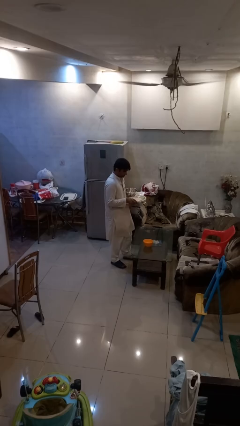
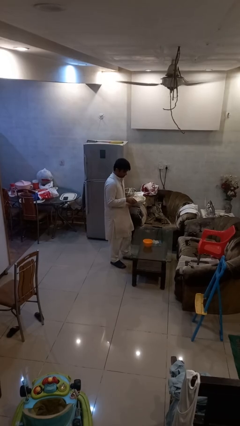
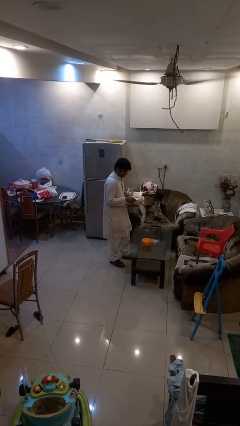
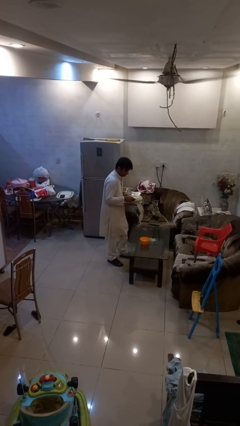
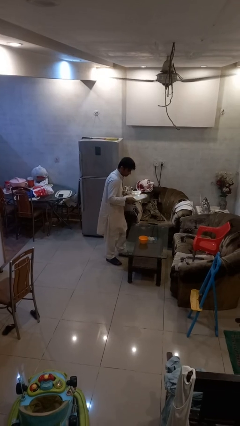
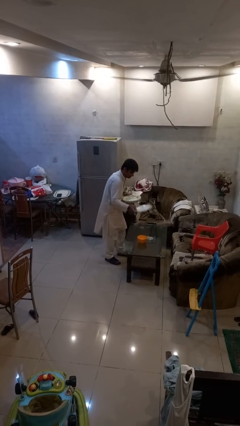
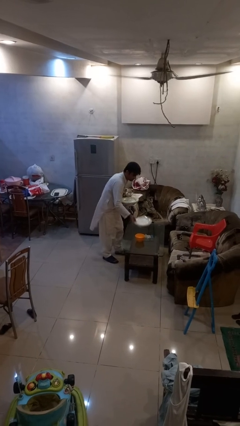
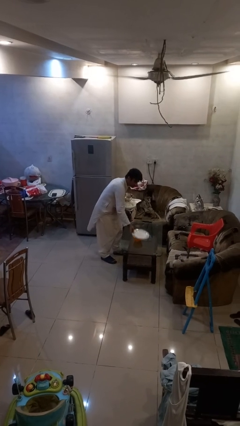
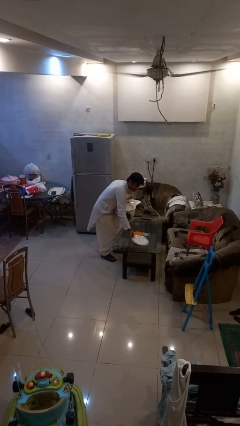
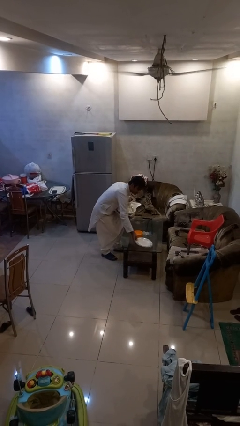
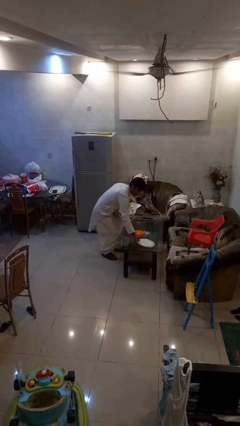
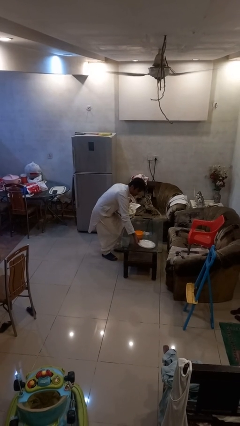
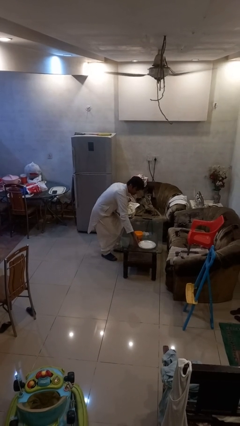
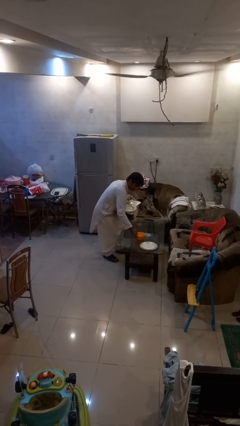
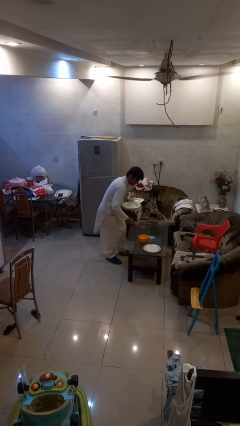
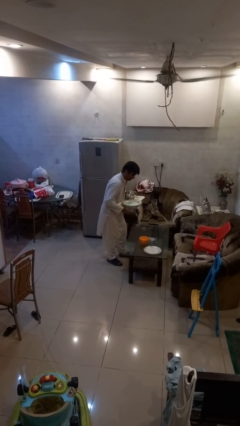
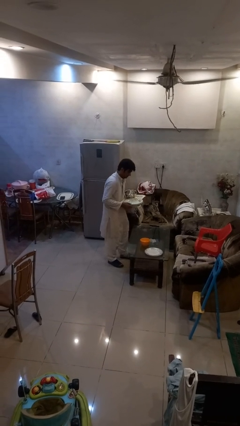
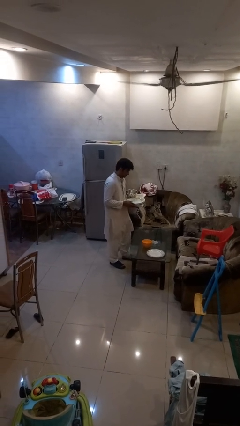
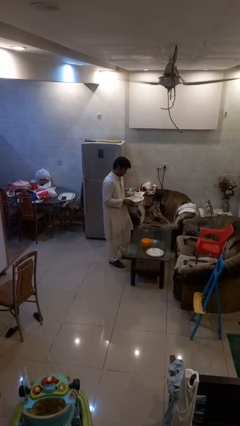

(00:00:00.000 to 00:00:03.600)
person sets table

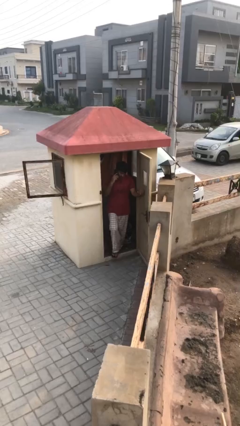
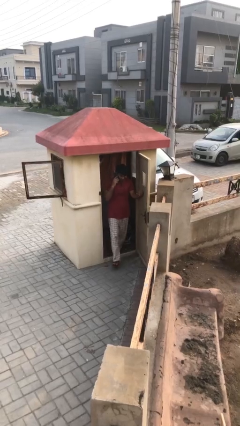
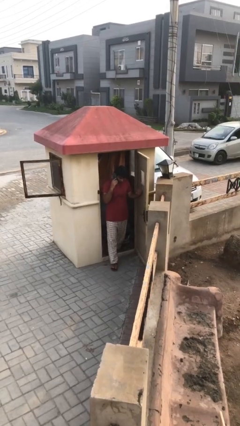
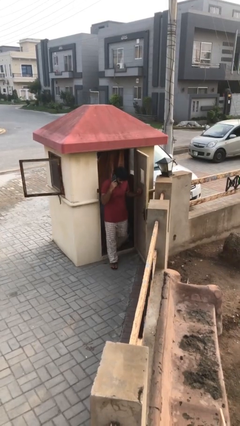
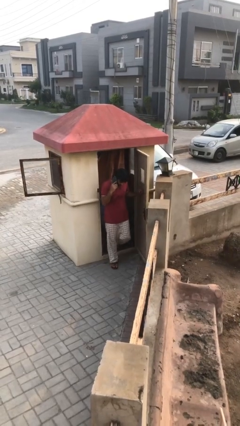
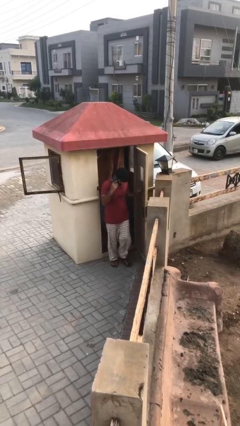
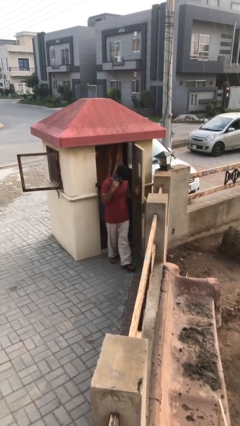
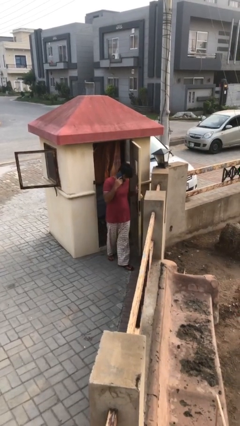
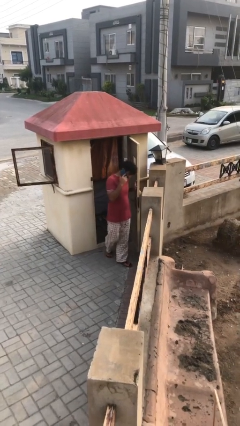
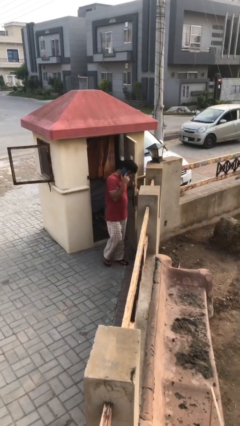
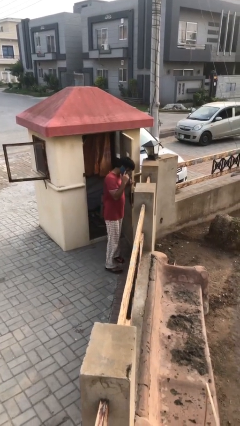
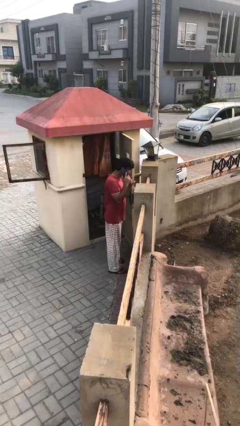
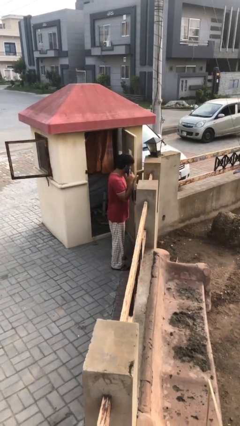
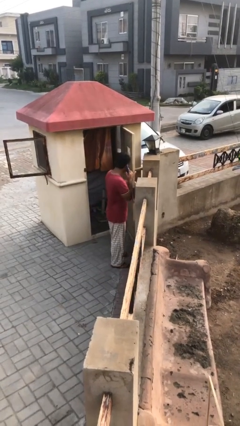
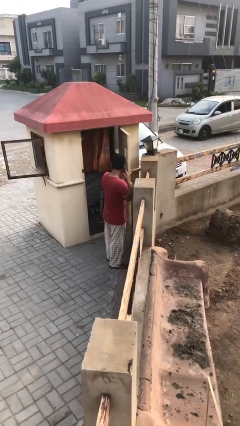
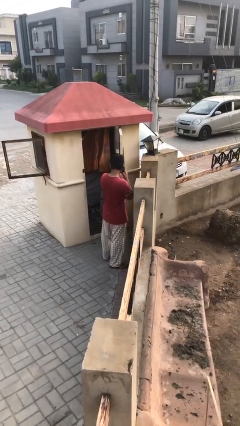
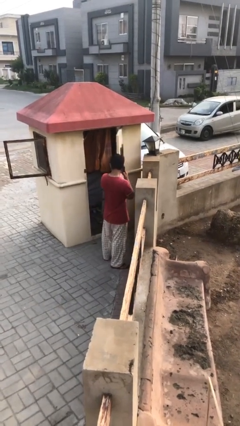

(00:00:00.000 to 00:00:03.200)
person enters scene through structure

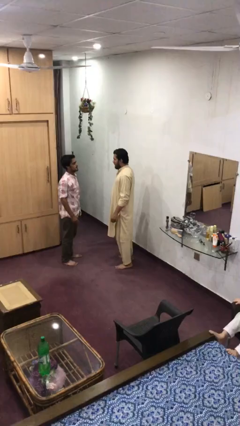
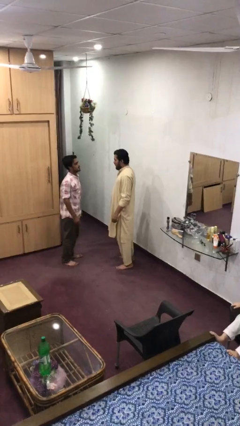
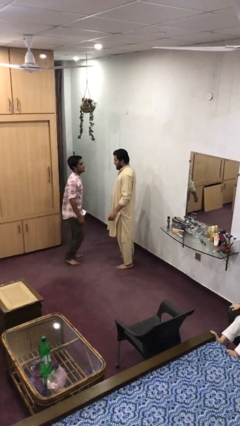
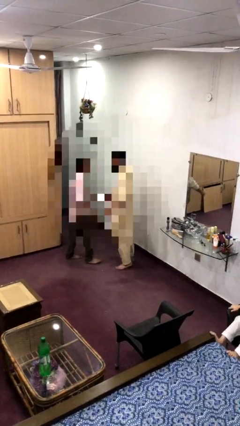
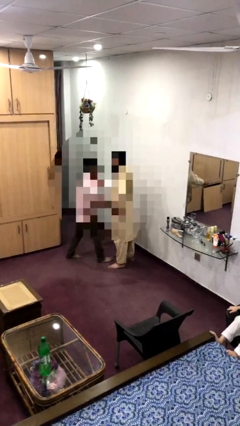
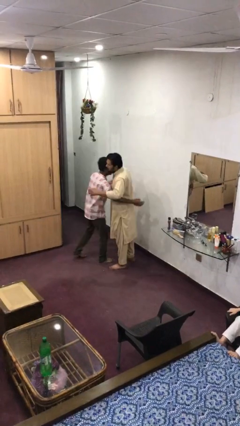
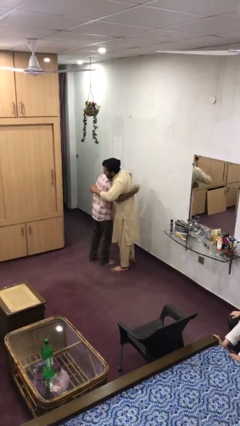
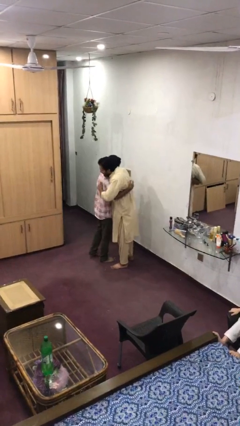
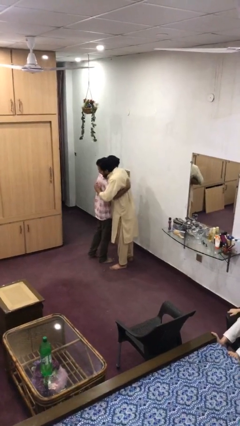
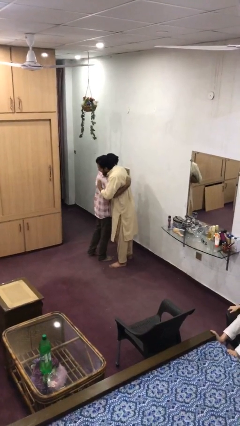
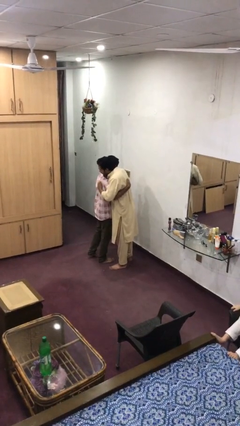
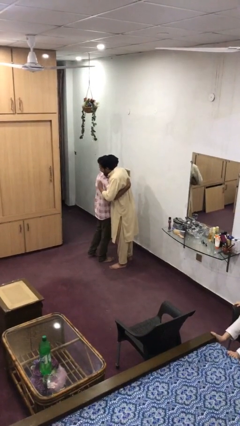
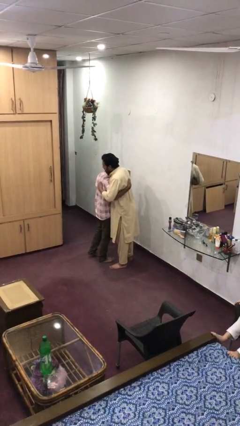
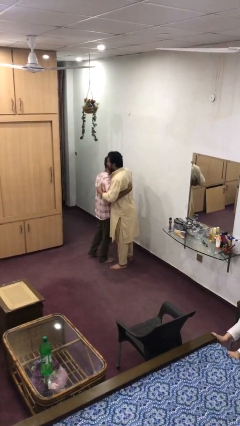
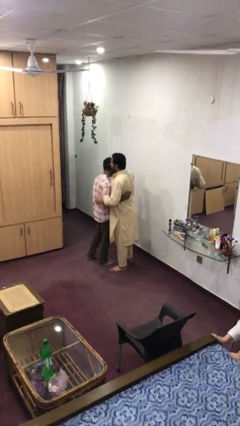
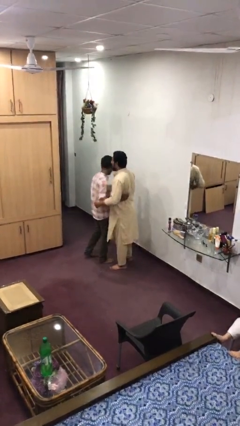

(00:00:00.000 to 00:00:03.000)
person embraces person

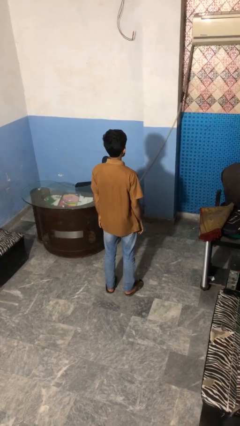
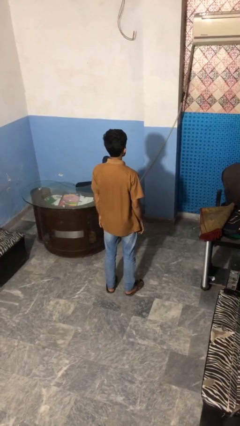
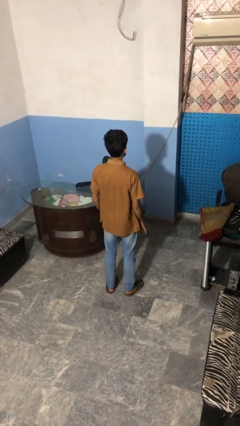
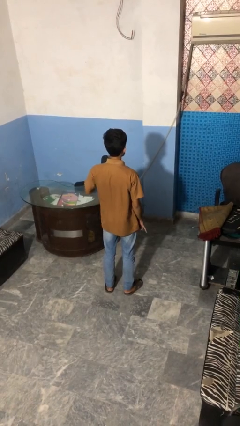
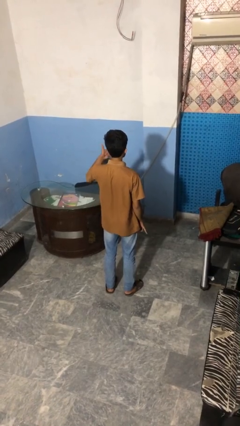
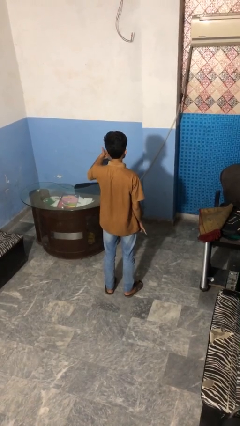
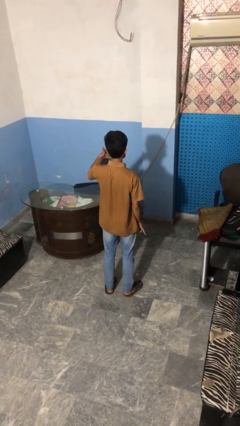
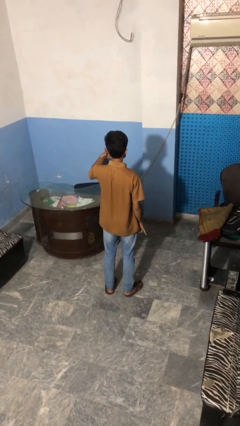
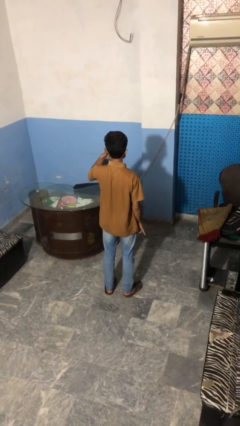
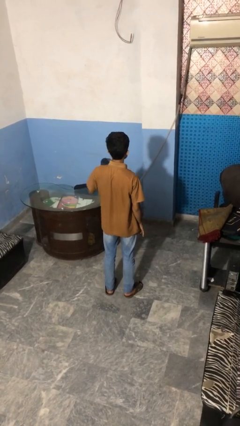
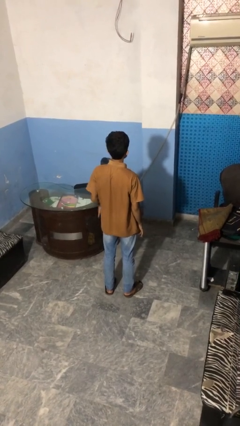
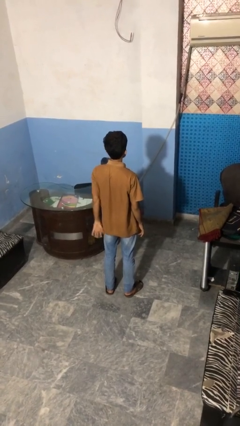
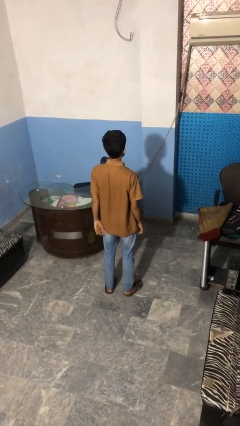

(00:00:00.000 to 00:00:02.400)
person gestures call me

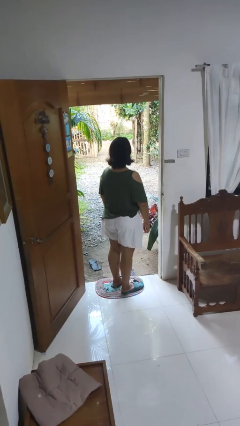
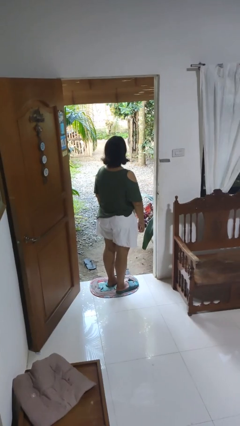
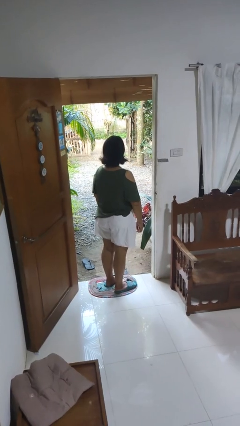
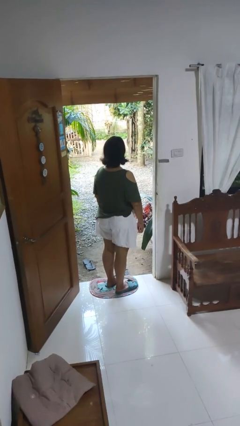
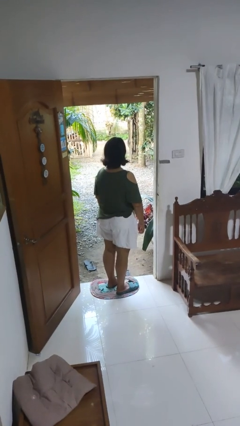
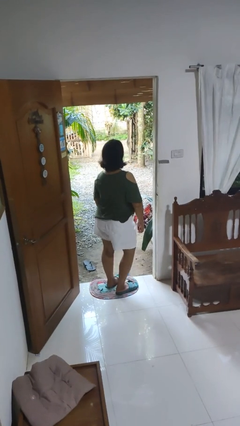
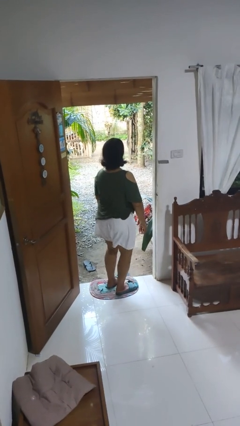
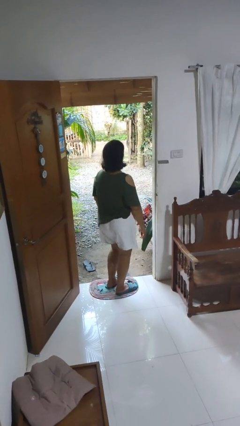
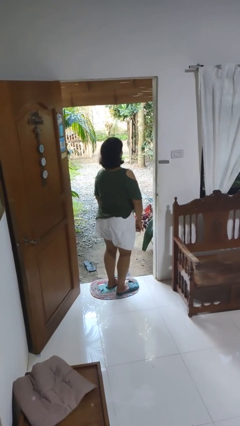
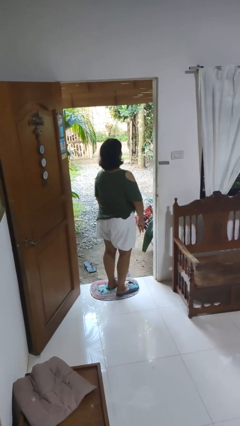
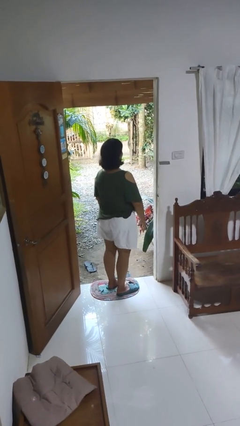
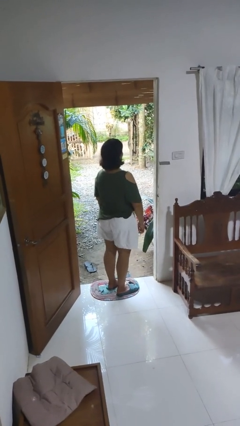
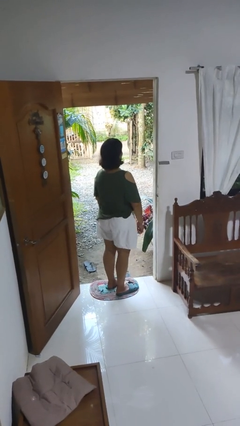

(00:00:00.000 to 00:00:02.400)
person wiggles hips

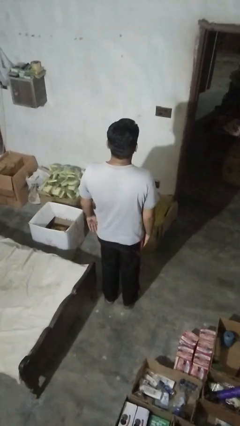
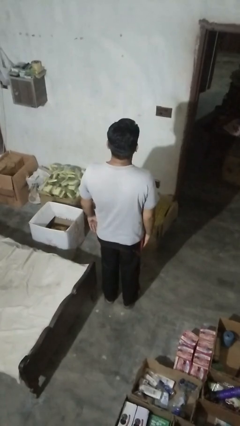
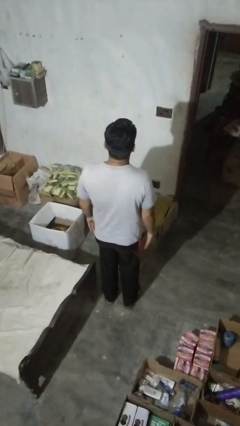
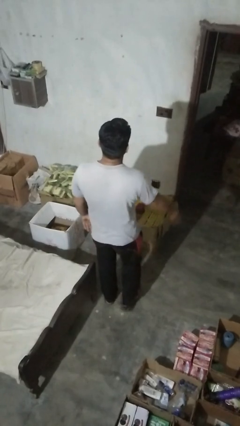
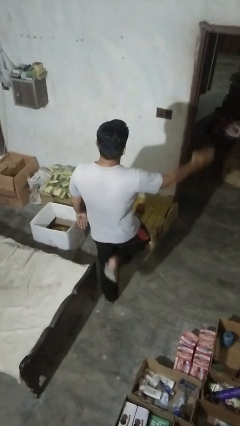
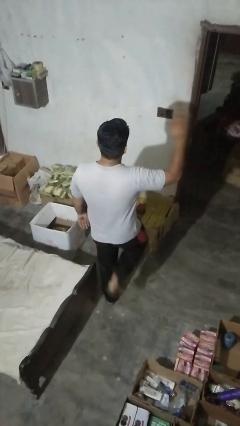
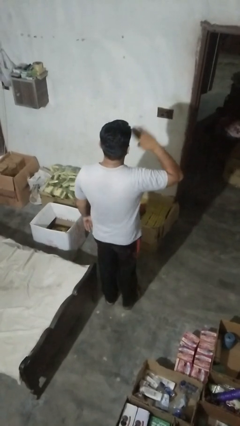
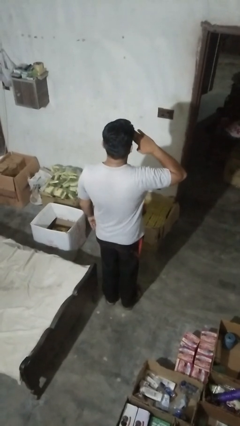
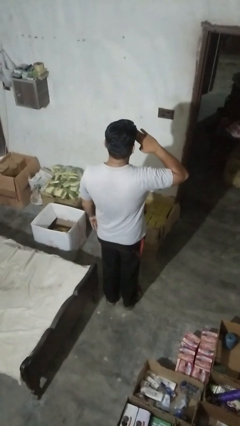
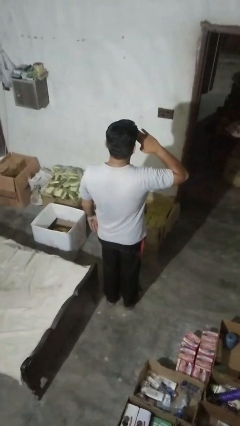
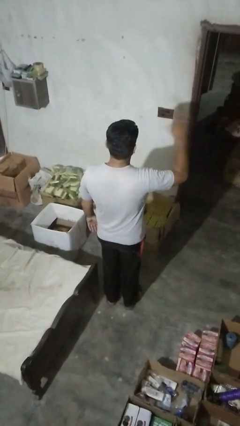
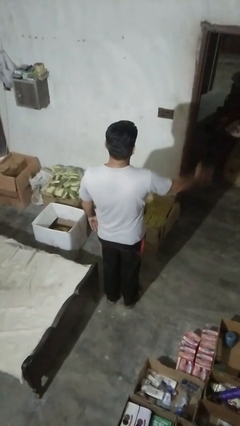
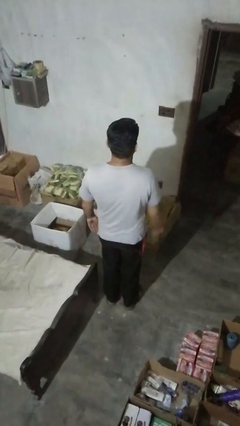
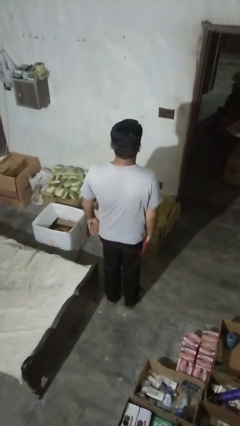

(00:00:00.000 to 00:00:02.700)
person salutes

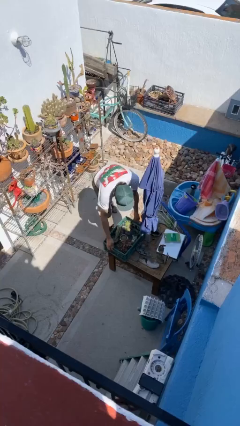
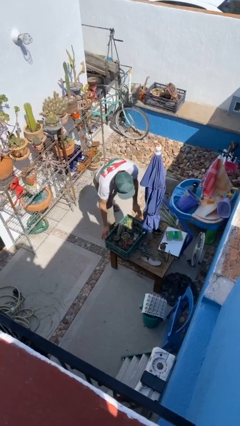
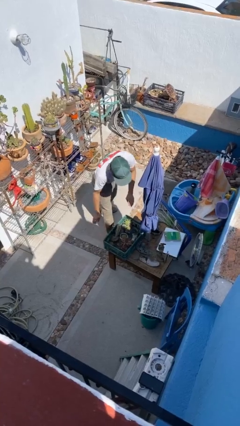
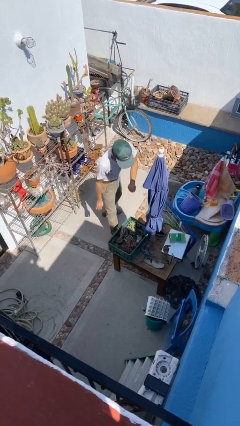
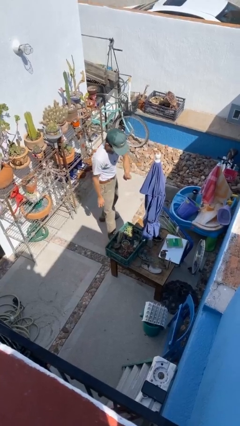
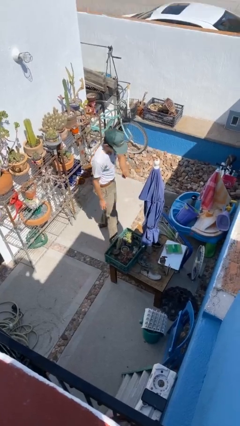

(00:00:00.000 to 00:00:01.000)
person puts down object on table
